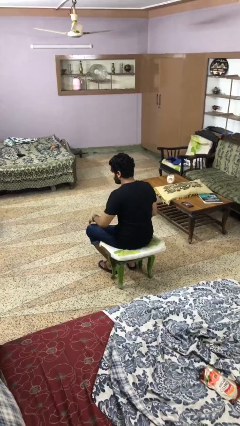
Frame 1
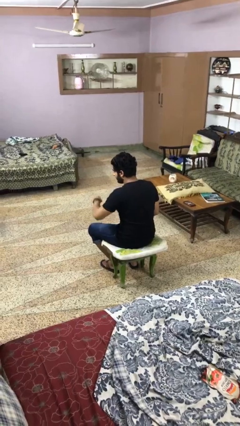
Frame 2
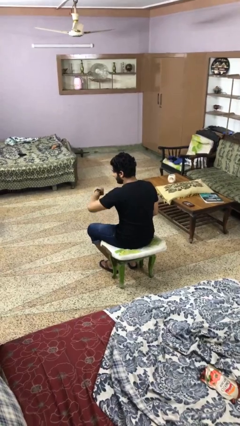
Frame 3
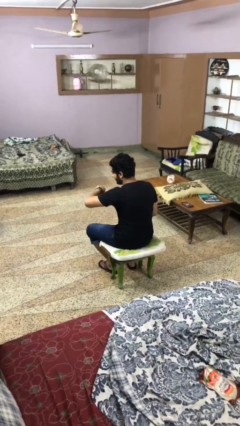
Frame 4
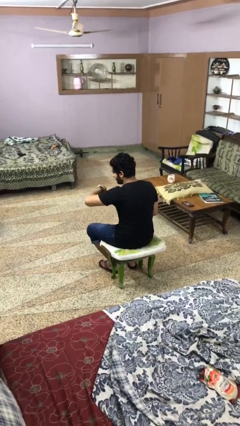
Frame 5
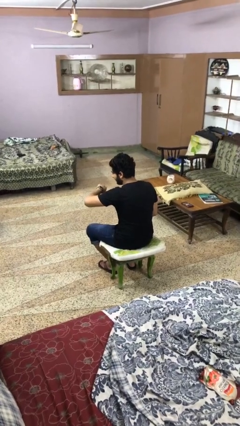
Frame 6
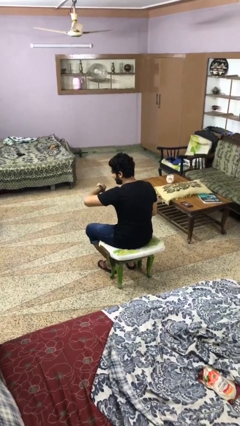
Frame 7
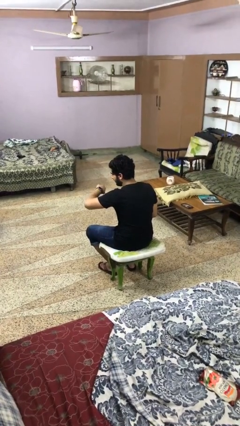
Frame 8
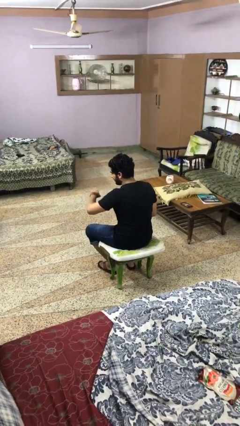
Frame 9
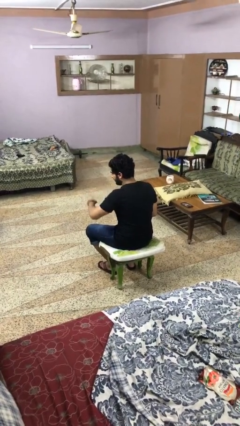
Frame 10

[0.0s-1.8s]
person looks at wristwatch

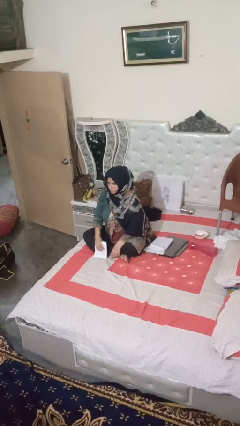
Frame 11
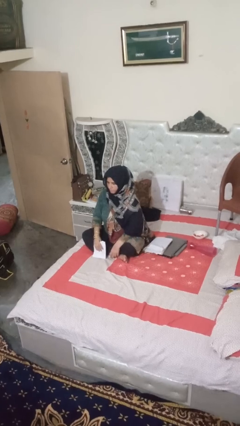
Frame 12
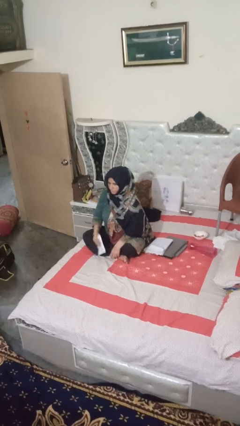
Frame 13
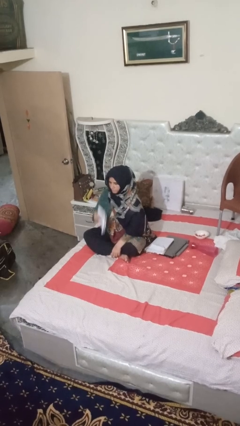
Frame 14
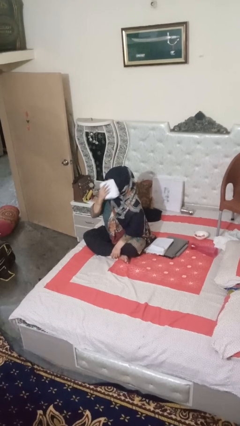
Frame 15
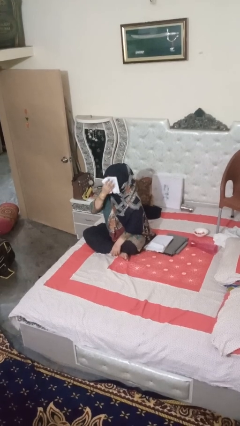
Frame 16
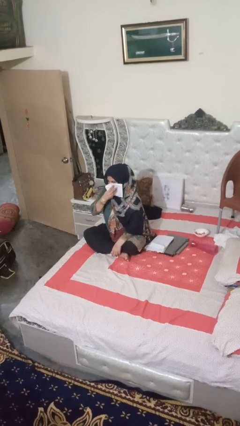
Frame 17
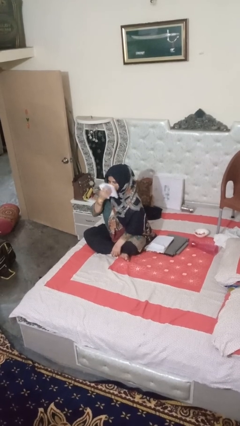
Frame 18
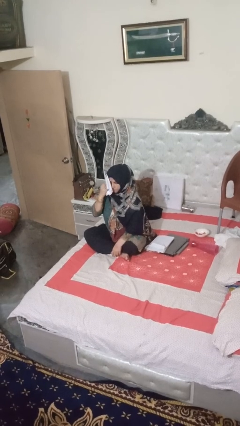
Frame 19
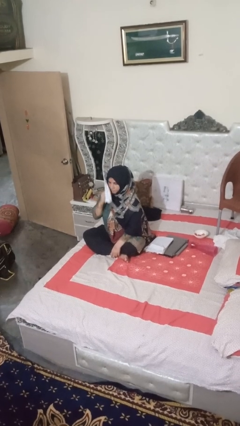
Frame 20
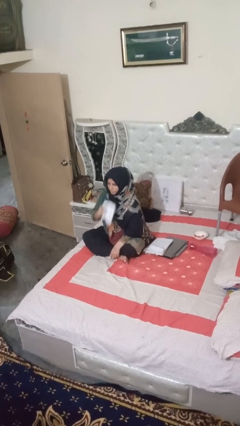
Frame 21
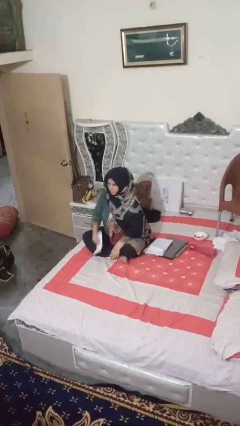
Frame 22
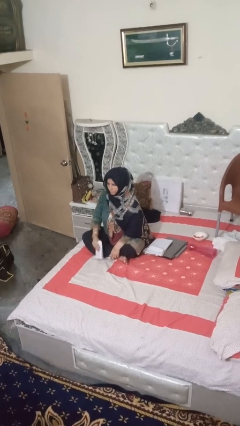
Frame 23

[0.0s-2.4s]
person wipes mouth with napkin

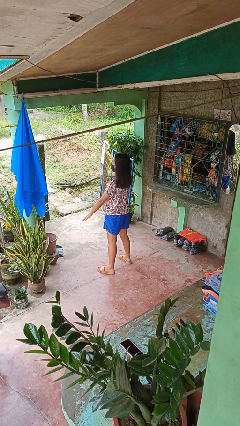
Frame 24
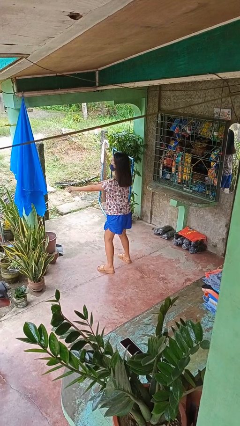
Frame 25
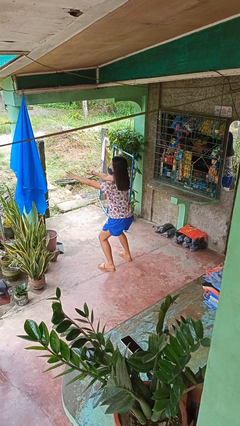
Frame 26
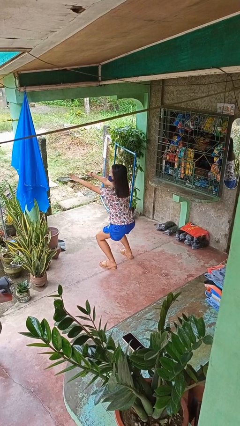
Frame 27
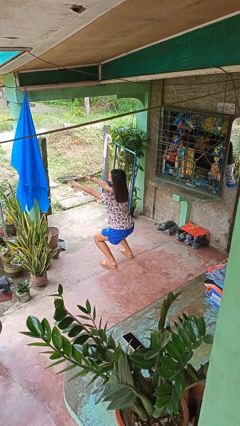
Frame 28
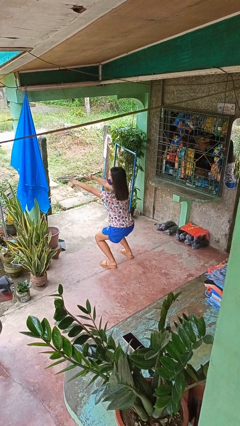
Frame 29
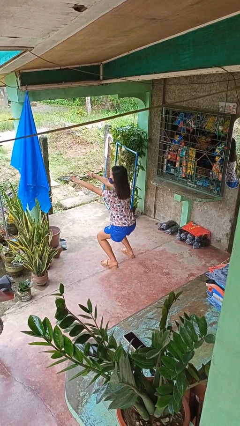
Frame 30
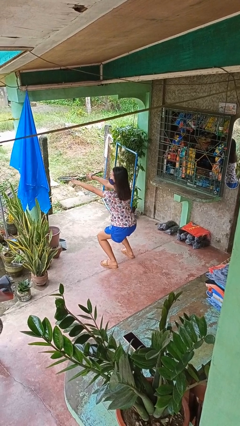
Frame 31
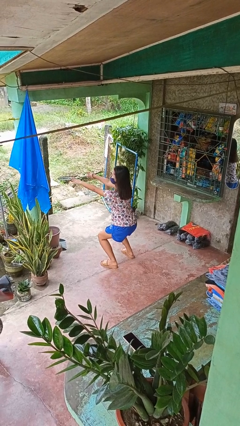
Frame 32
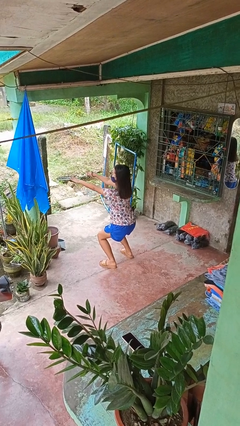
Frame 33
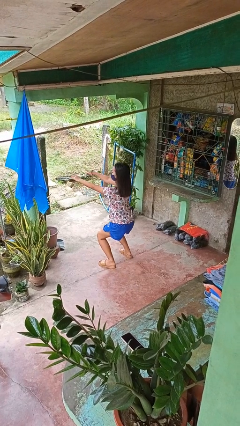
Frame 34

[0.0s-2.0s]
person squats

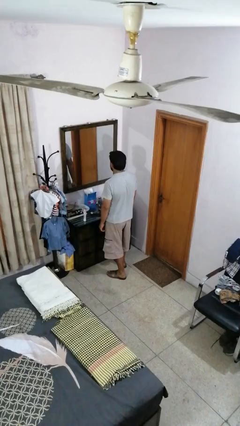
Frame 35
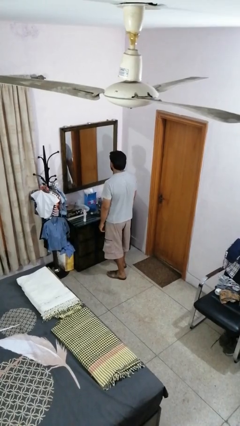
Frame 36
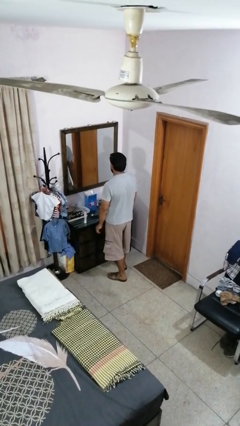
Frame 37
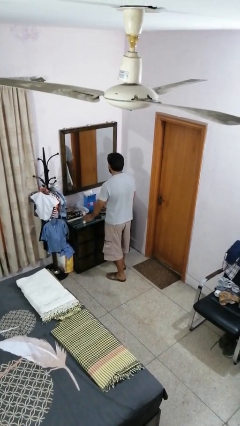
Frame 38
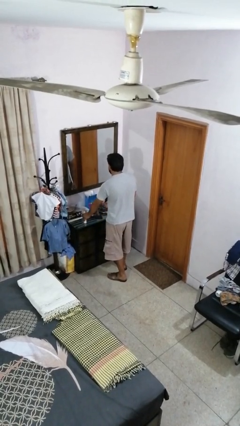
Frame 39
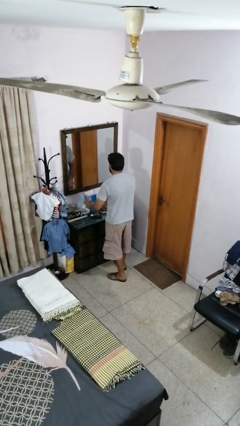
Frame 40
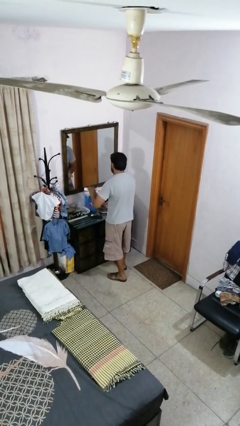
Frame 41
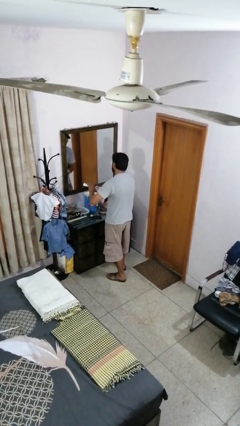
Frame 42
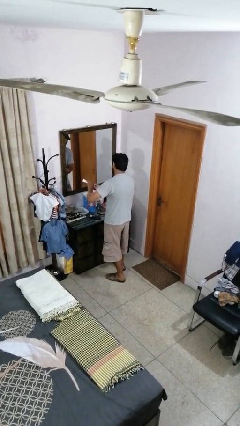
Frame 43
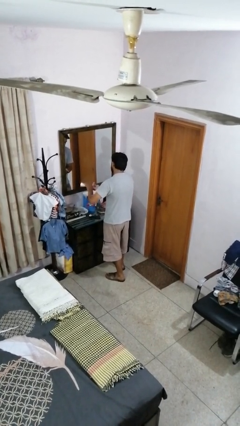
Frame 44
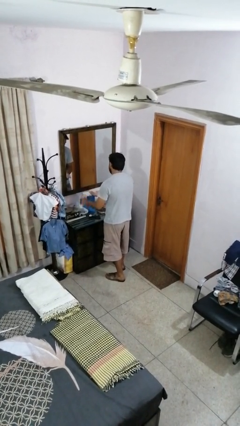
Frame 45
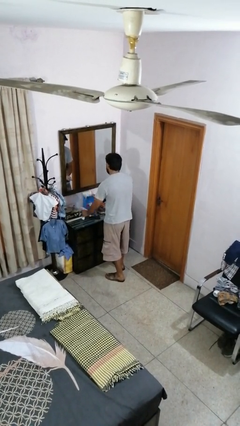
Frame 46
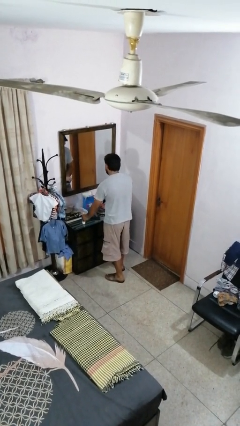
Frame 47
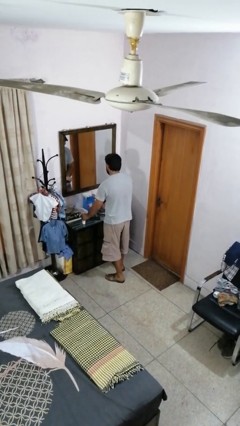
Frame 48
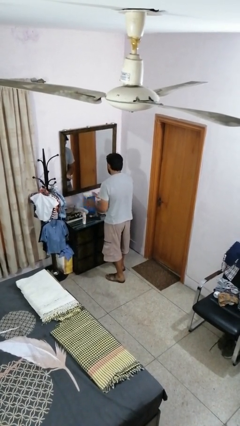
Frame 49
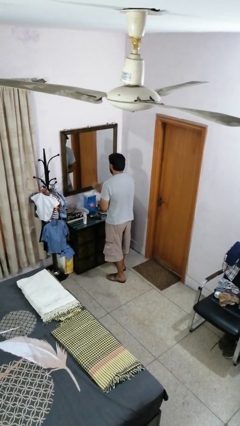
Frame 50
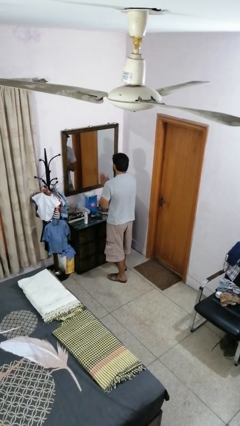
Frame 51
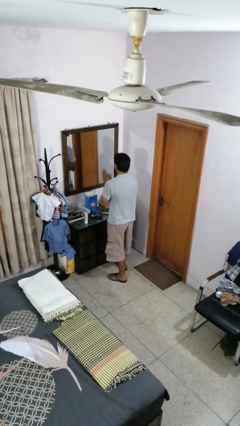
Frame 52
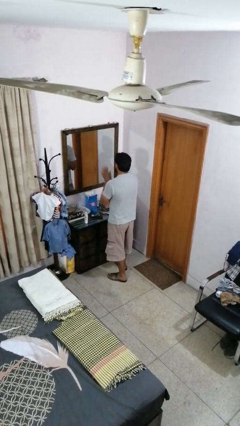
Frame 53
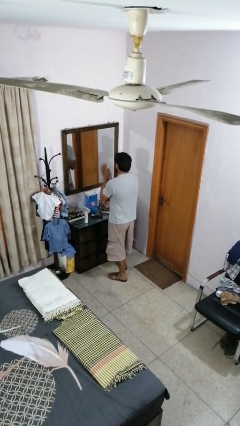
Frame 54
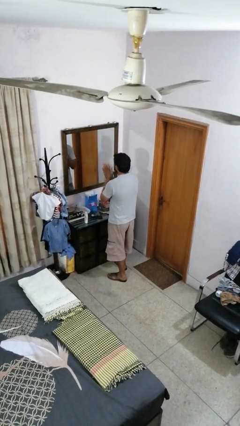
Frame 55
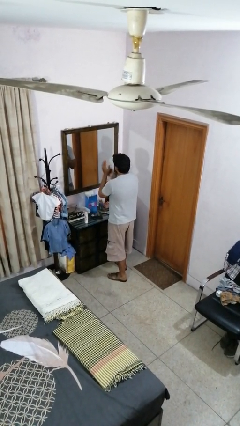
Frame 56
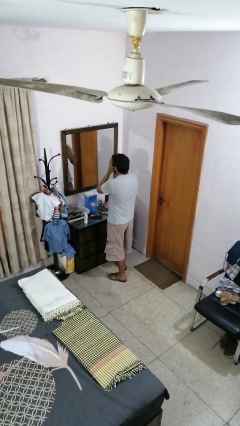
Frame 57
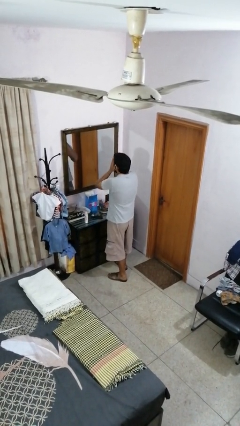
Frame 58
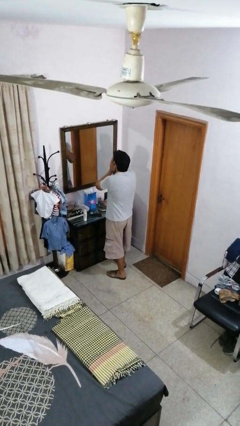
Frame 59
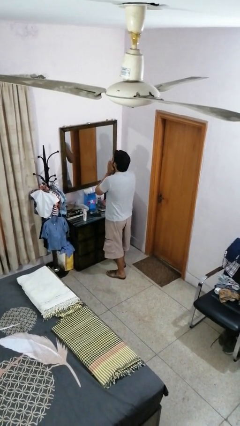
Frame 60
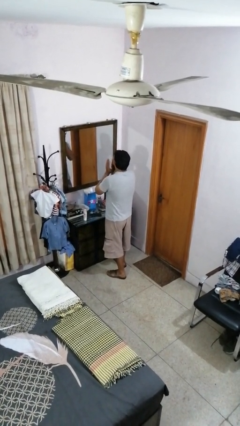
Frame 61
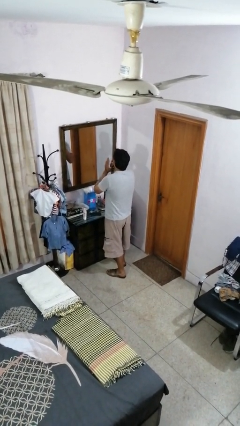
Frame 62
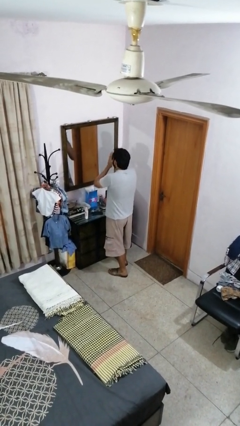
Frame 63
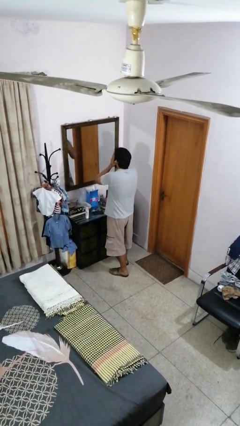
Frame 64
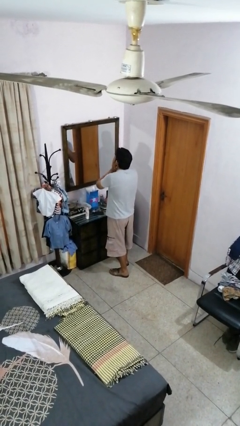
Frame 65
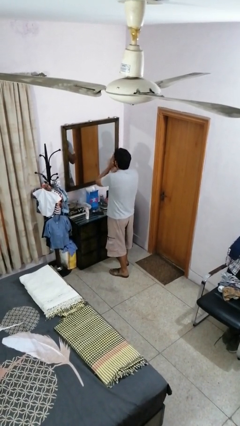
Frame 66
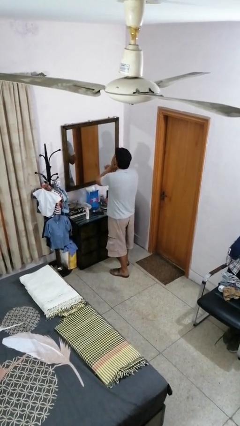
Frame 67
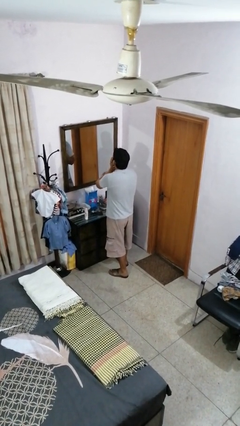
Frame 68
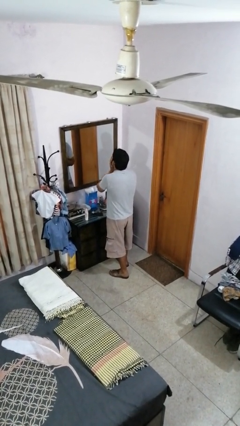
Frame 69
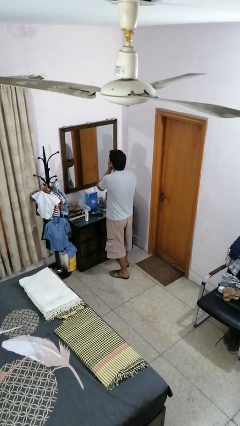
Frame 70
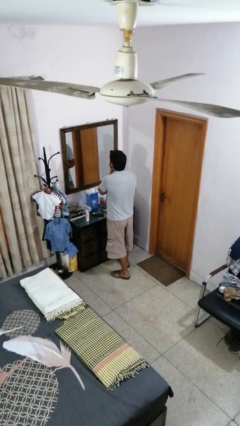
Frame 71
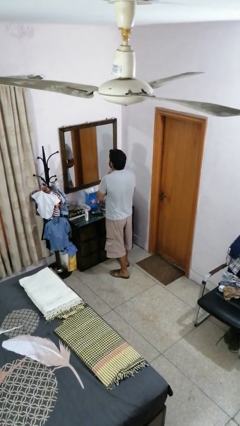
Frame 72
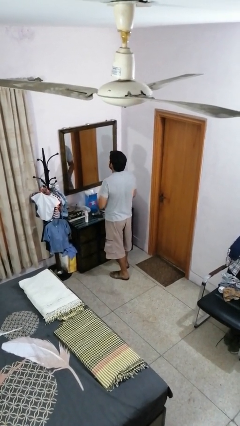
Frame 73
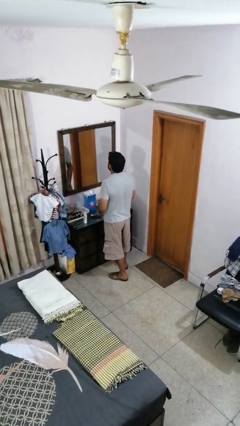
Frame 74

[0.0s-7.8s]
person applies sunscreen

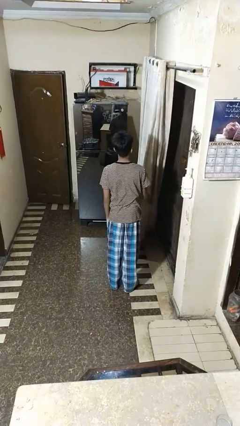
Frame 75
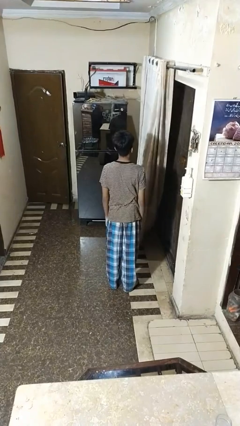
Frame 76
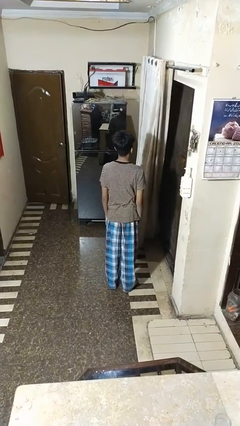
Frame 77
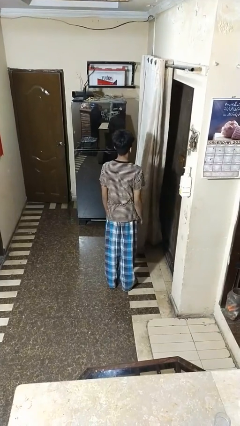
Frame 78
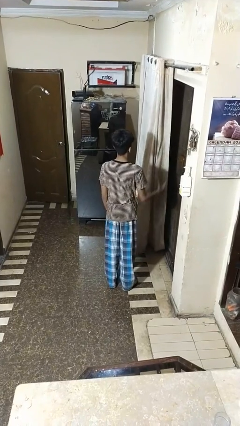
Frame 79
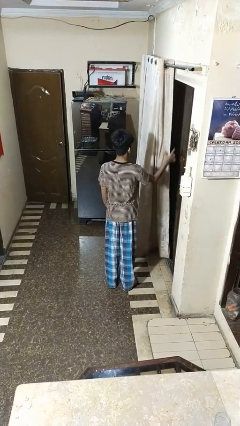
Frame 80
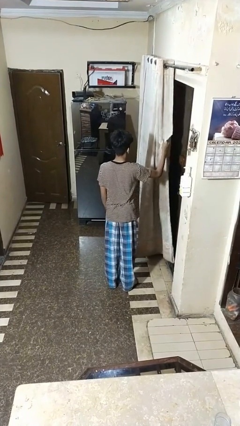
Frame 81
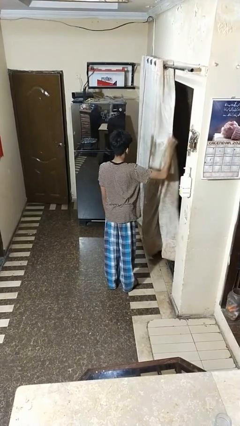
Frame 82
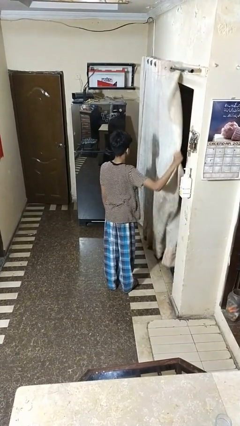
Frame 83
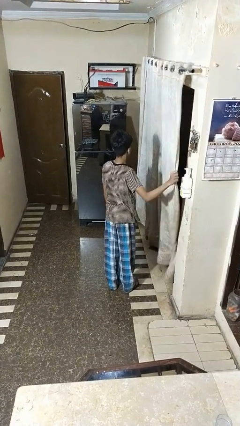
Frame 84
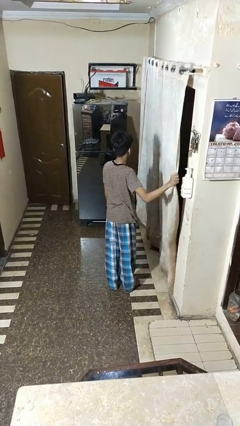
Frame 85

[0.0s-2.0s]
person closes curtains

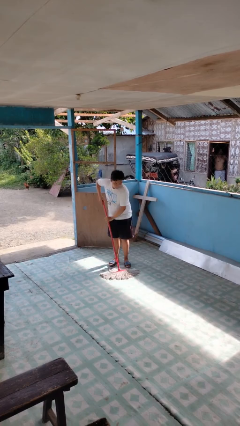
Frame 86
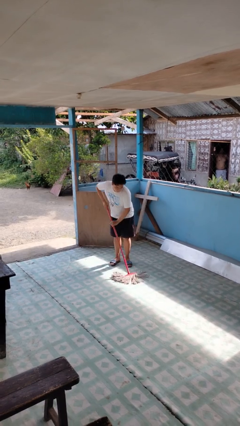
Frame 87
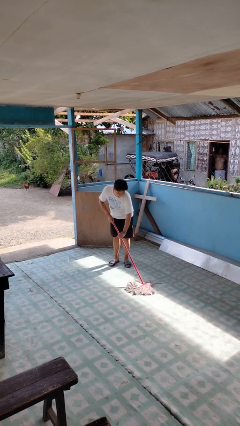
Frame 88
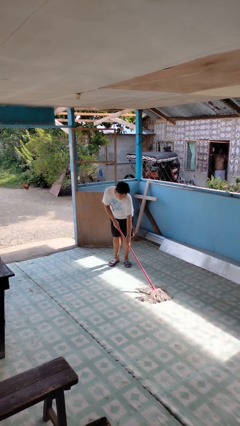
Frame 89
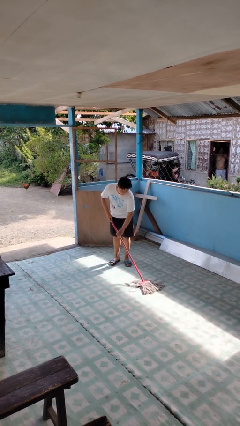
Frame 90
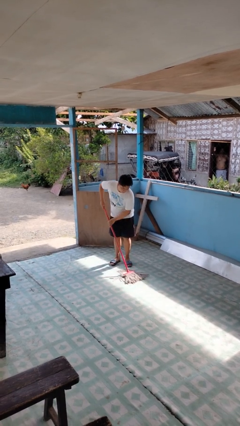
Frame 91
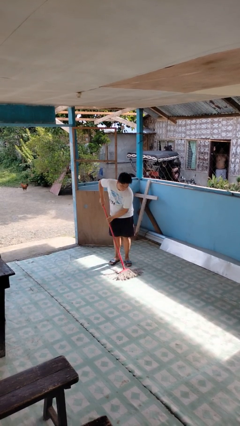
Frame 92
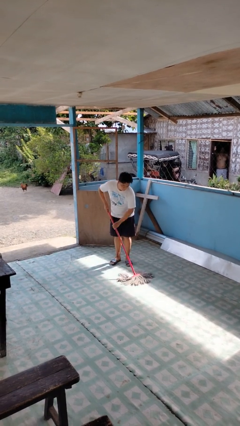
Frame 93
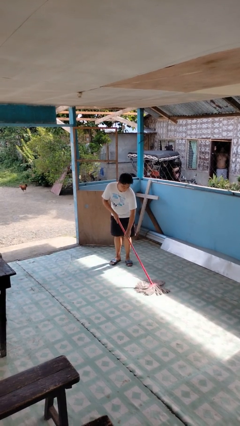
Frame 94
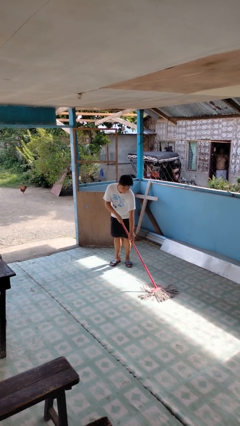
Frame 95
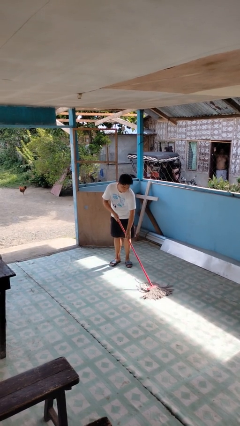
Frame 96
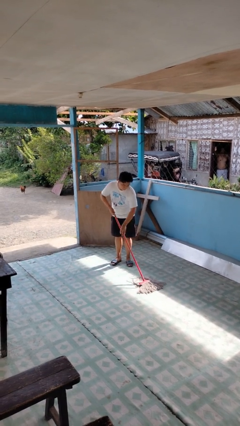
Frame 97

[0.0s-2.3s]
person mops
